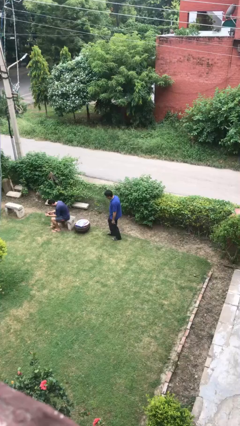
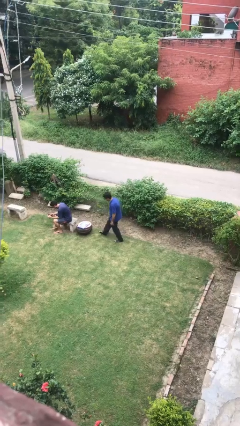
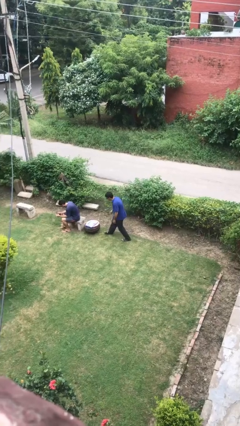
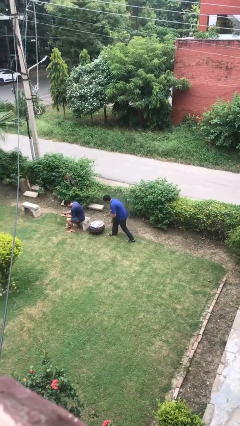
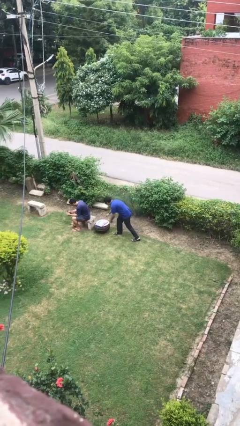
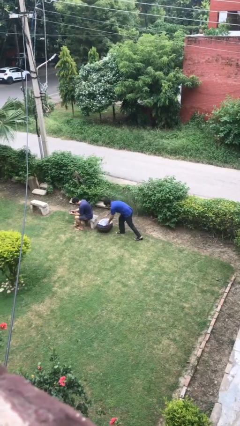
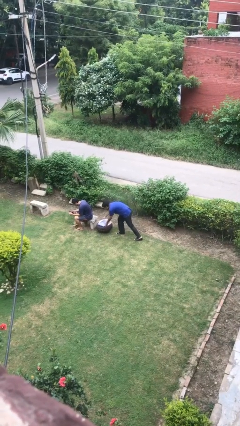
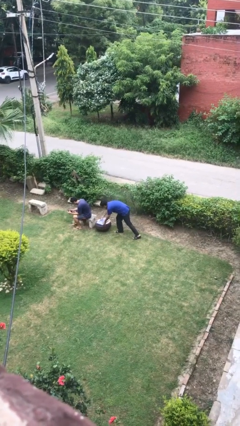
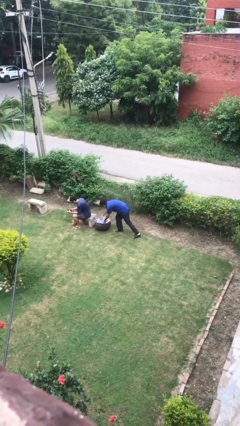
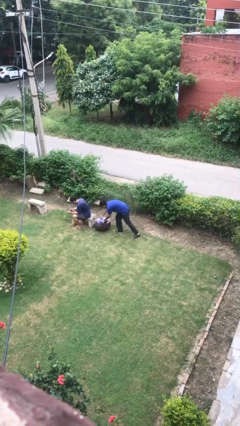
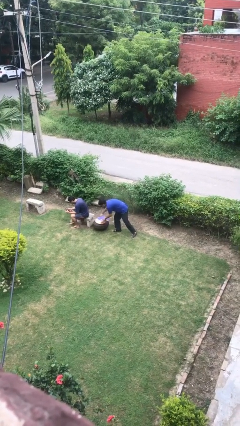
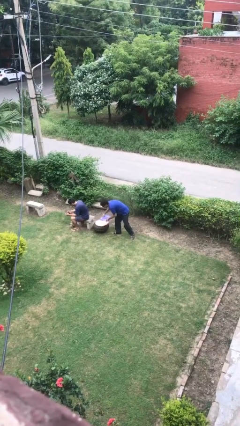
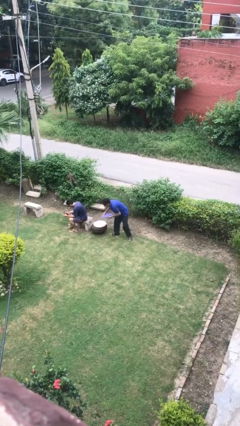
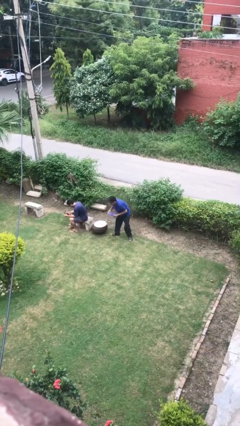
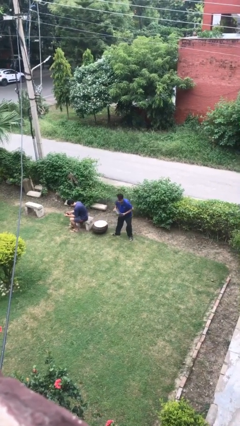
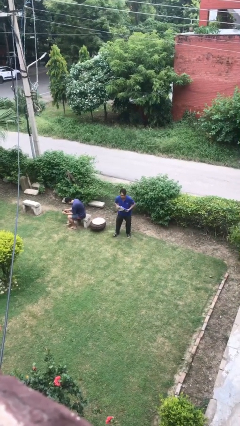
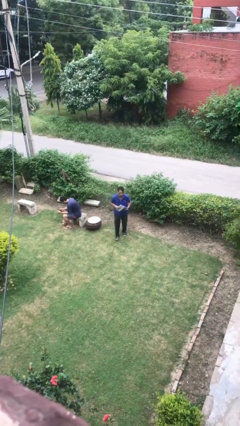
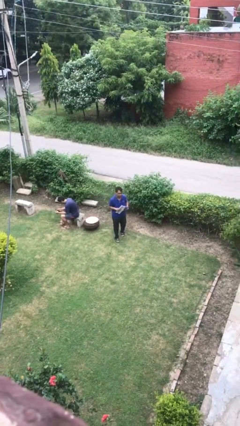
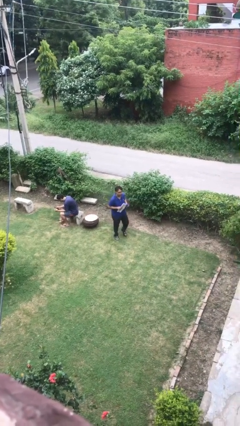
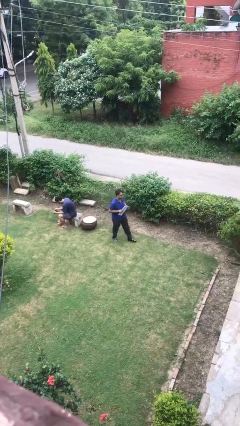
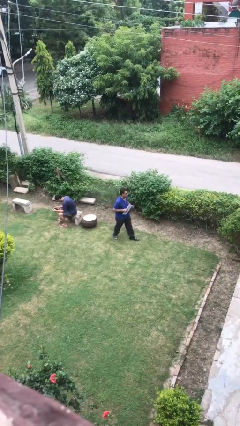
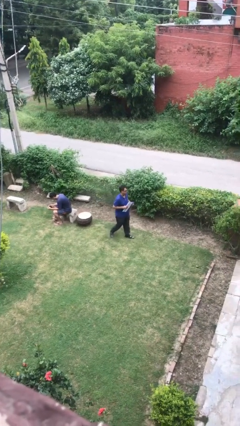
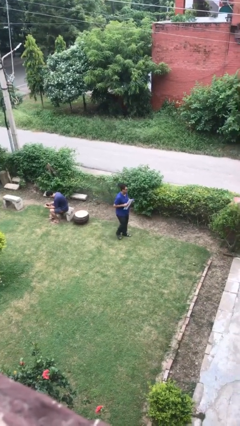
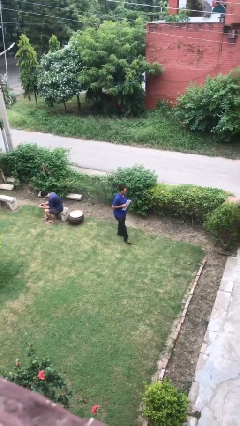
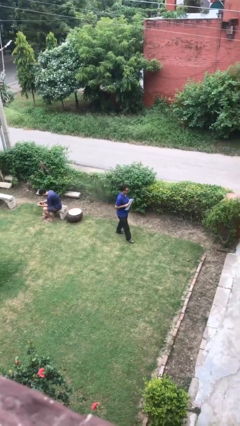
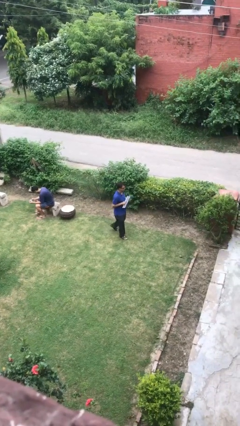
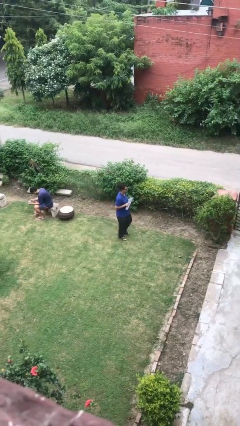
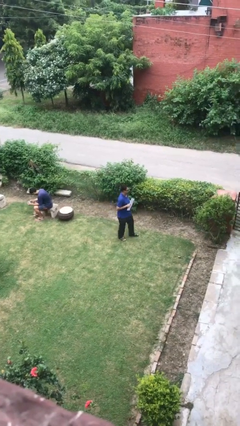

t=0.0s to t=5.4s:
person steals object from person

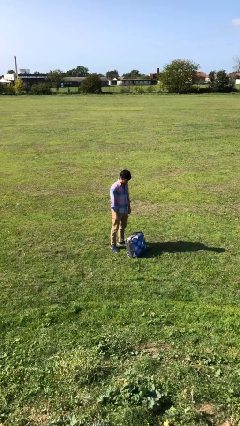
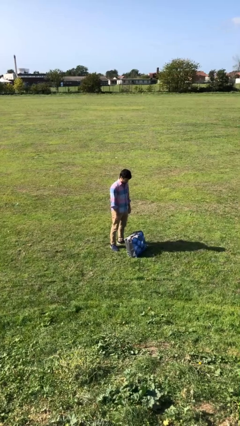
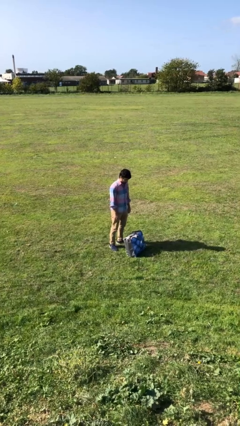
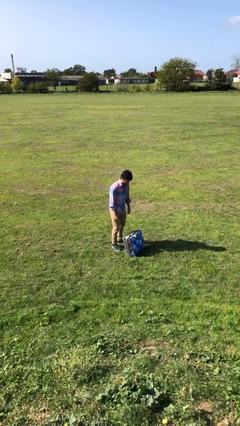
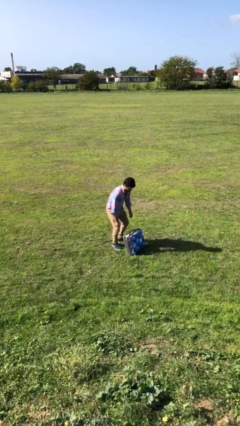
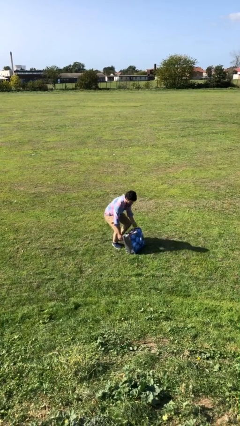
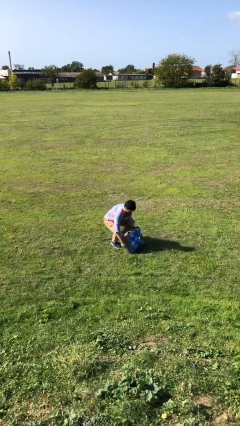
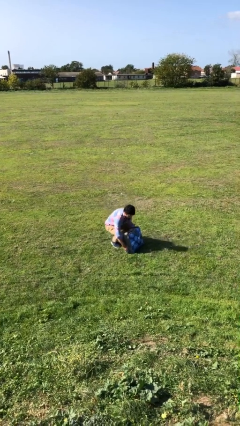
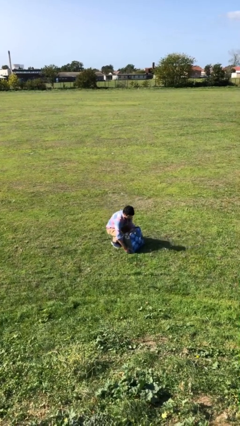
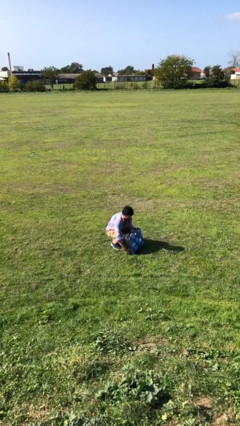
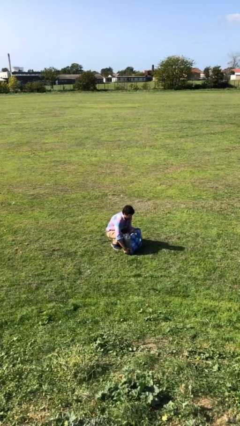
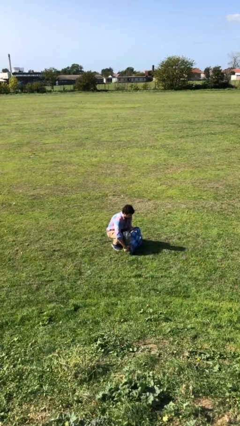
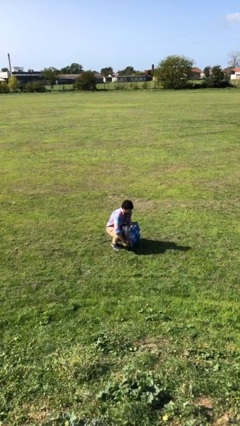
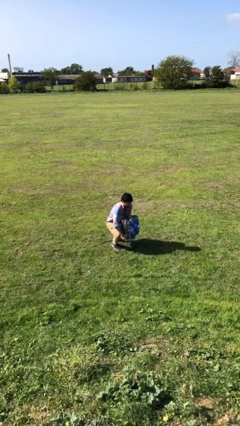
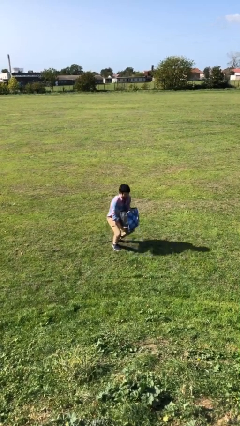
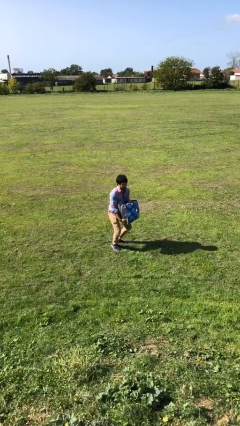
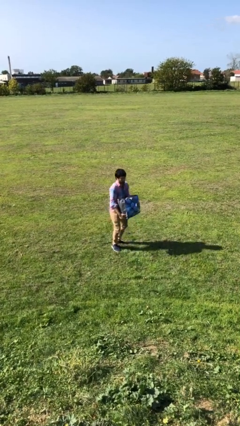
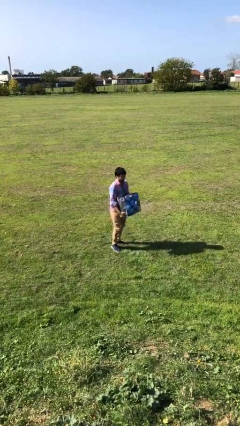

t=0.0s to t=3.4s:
person picks up object from floor

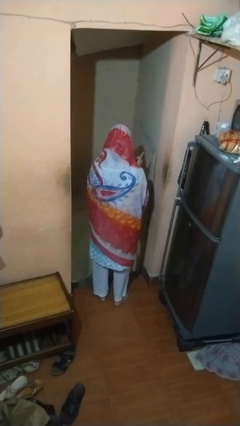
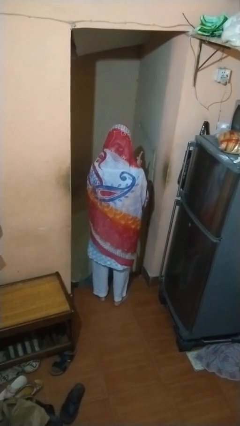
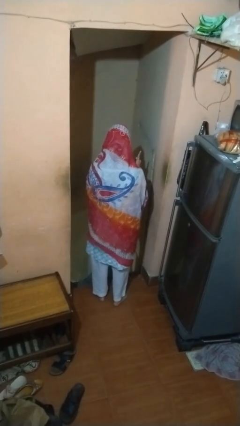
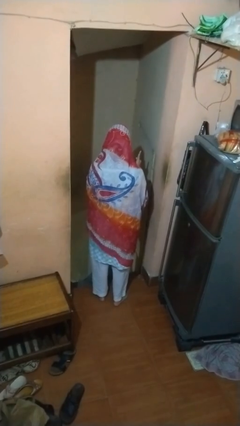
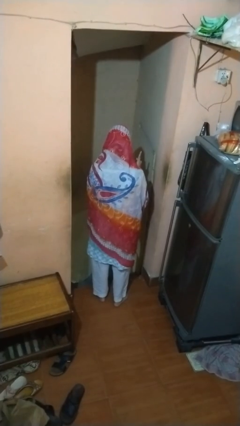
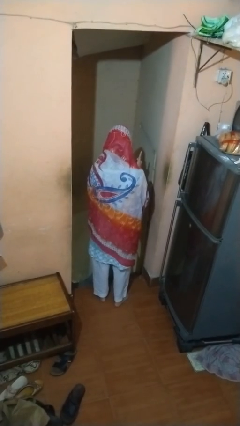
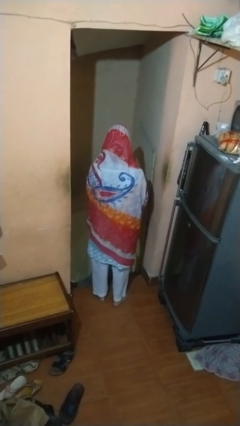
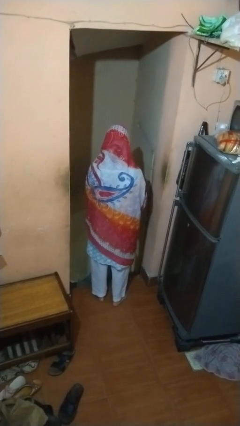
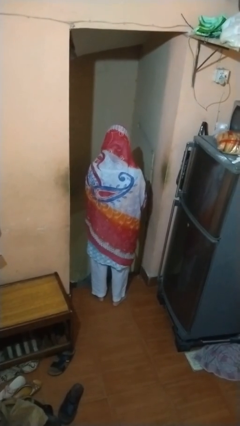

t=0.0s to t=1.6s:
person gestures number one

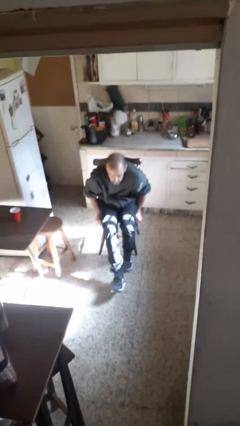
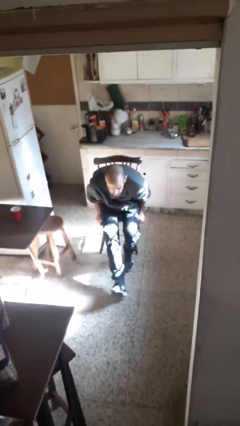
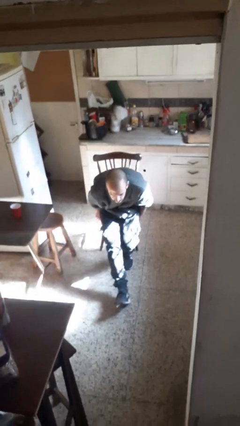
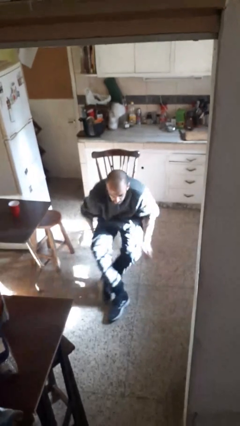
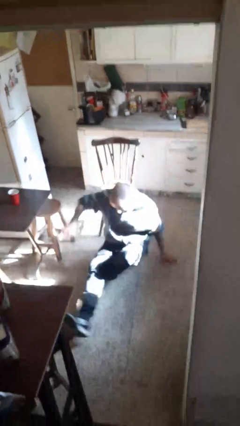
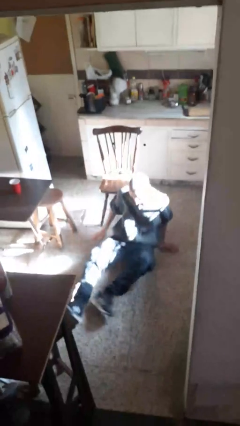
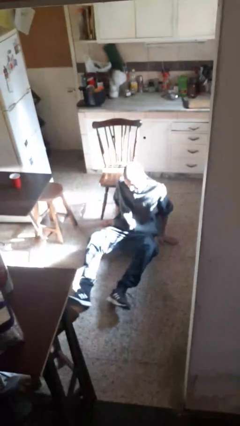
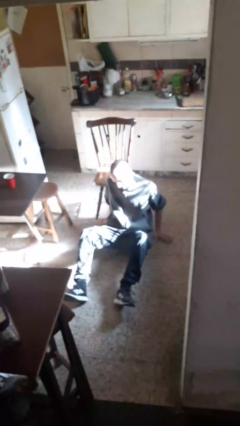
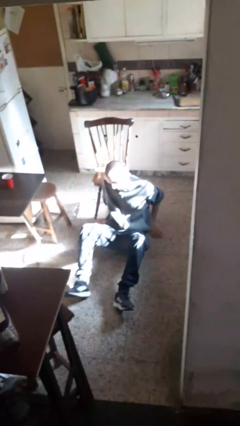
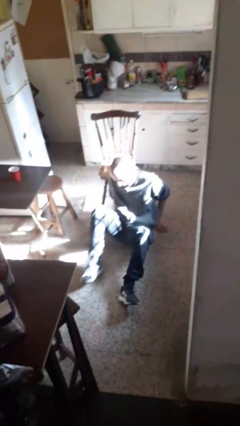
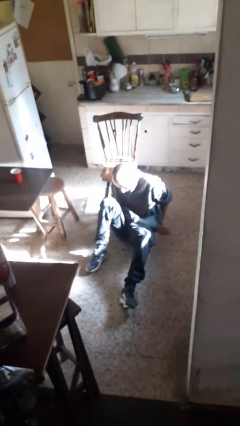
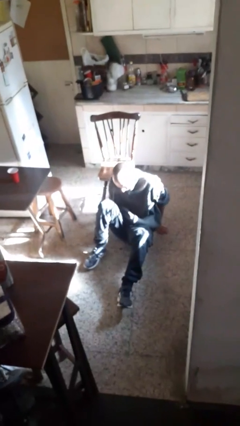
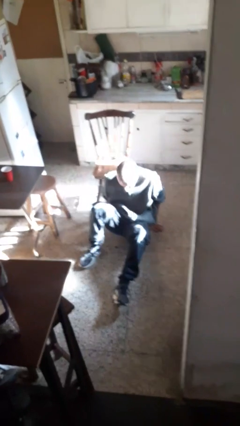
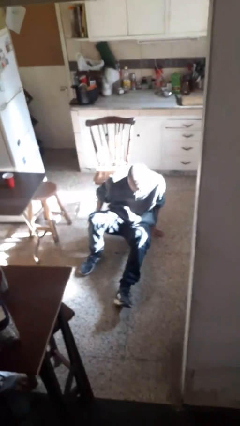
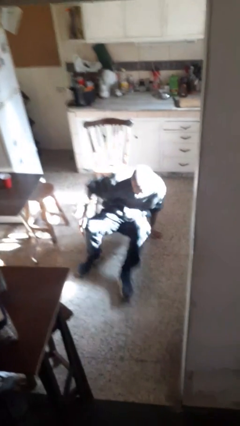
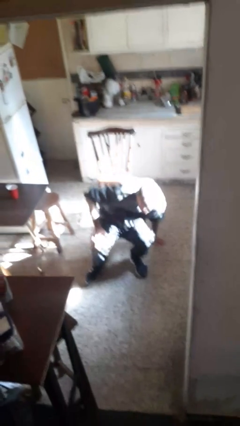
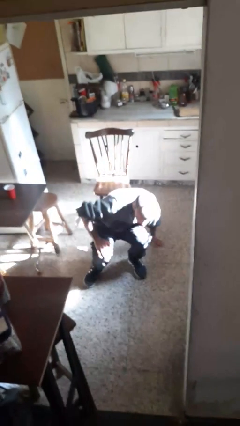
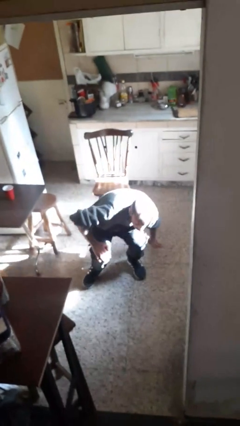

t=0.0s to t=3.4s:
person falls from chair

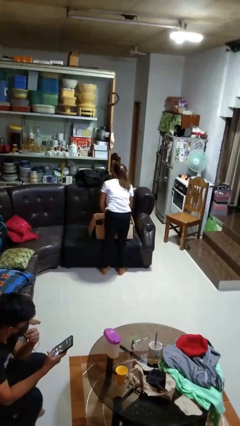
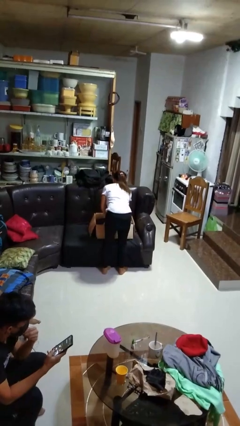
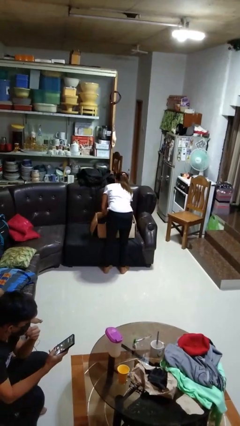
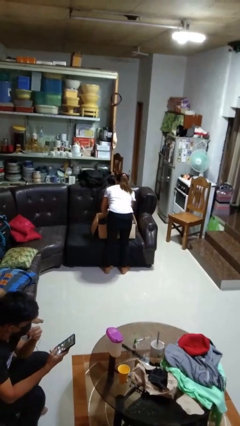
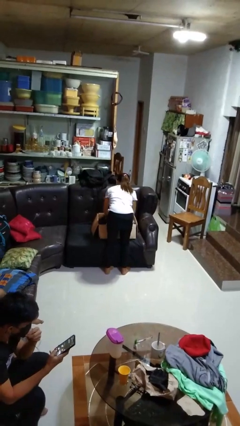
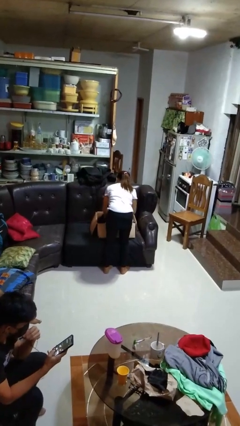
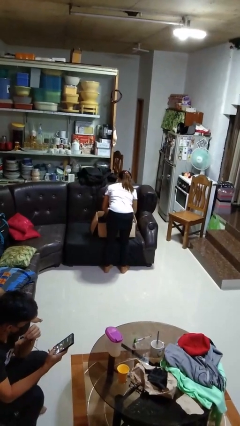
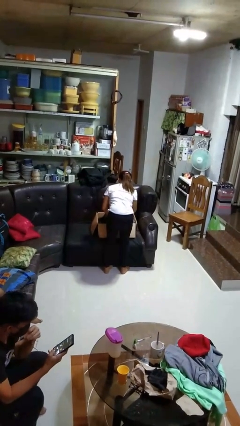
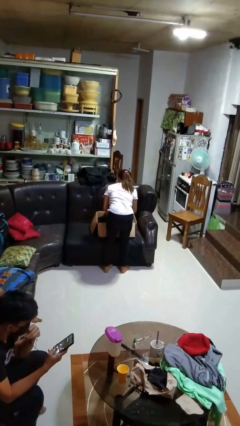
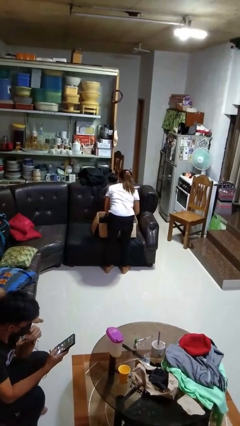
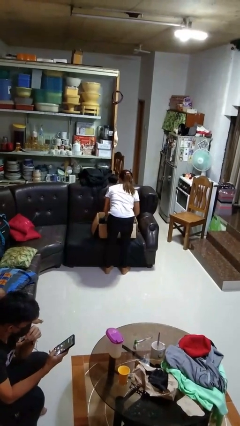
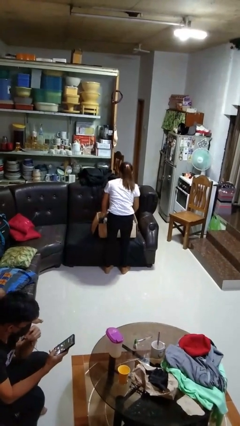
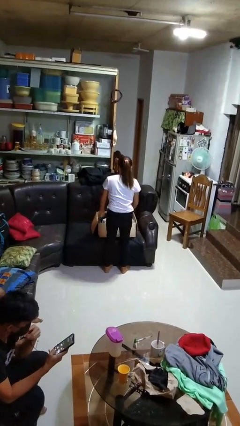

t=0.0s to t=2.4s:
person searches in box

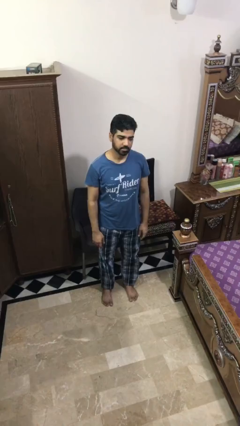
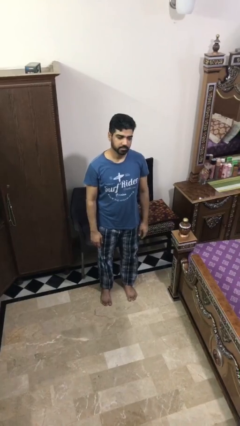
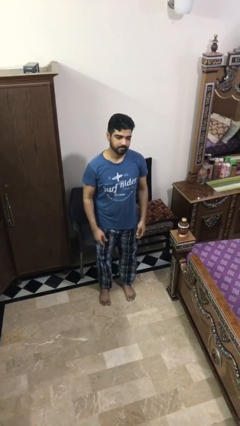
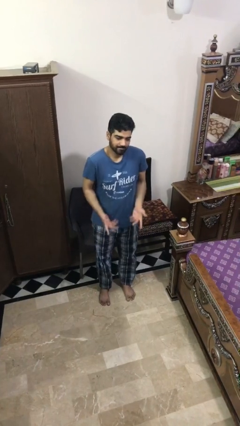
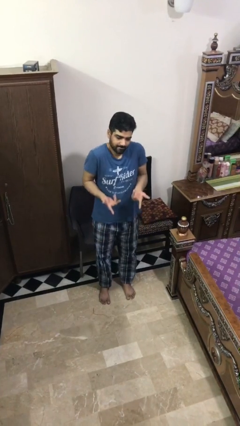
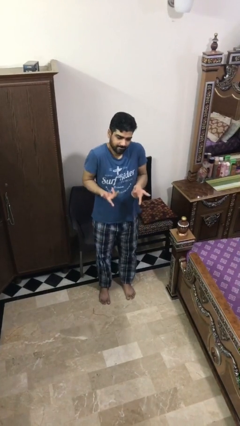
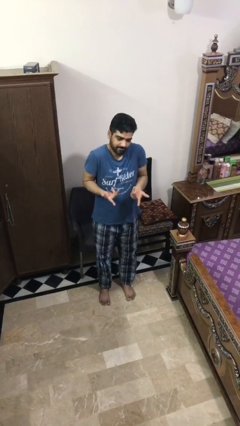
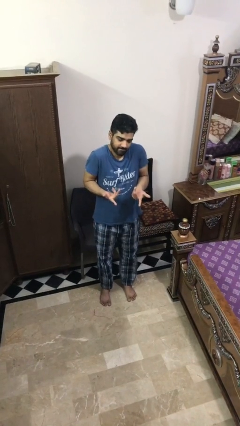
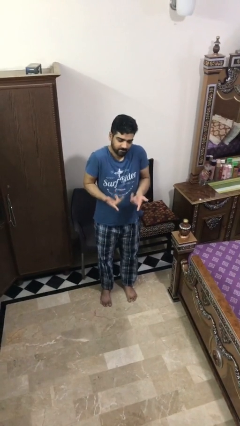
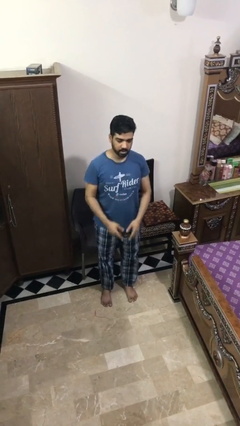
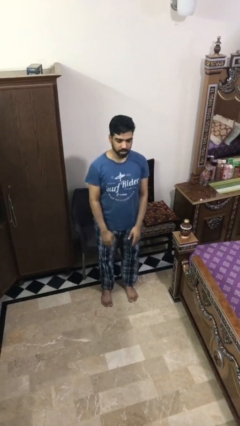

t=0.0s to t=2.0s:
person shrugs
